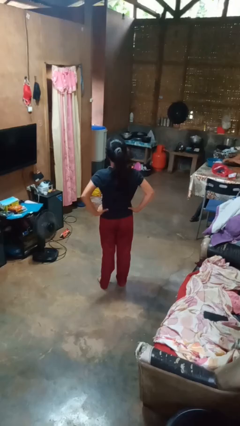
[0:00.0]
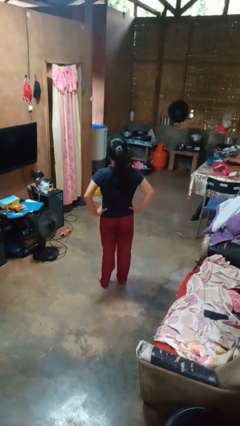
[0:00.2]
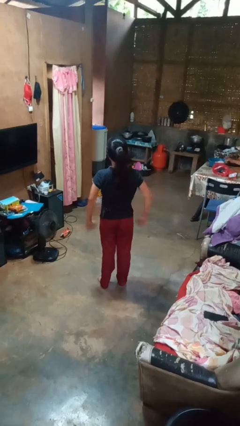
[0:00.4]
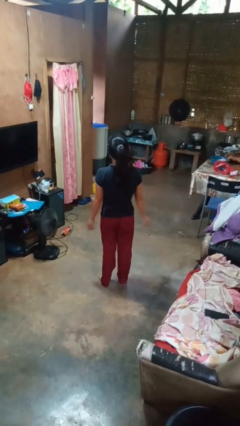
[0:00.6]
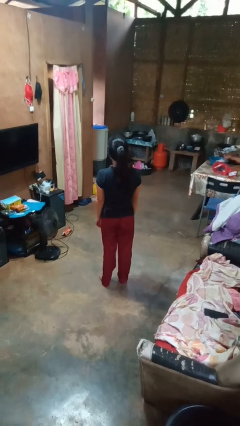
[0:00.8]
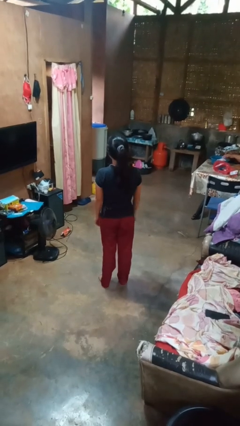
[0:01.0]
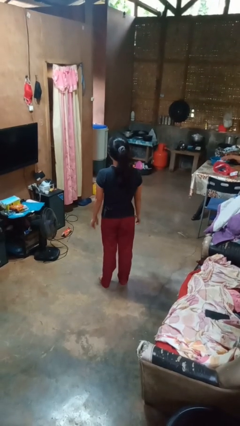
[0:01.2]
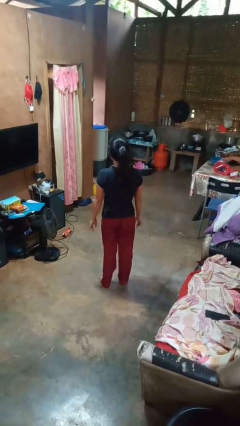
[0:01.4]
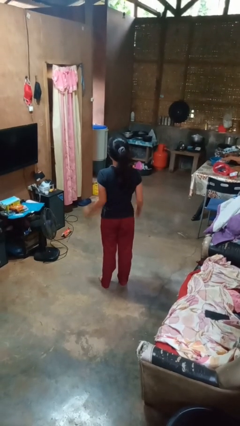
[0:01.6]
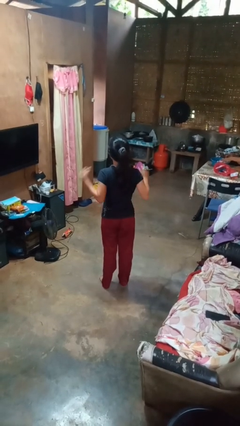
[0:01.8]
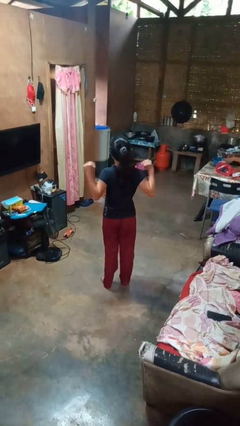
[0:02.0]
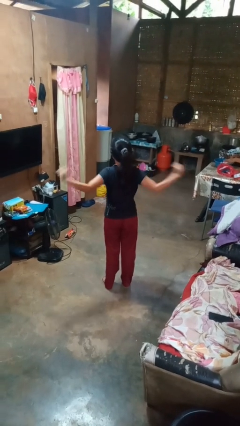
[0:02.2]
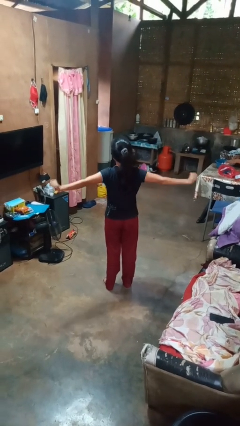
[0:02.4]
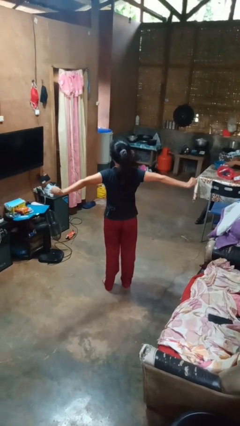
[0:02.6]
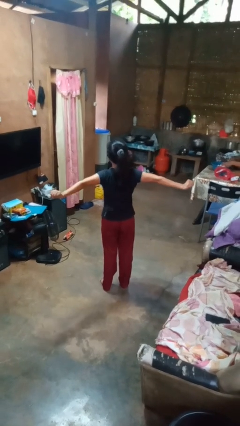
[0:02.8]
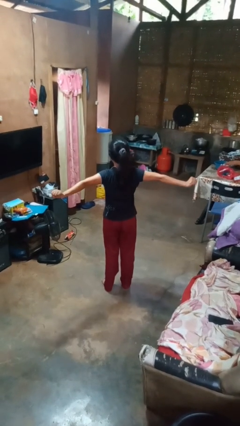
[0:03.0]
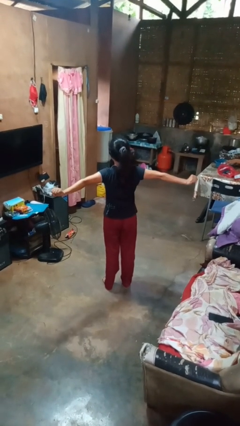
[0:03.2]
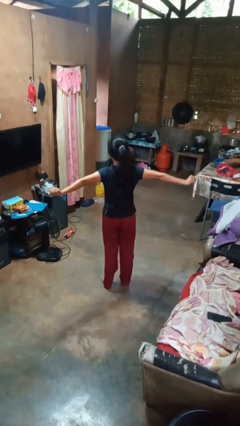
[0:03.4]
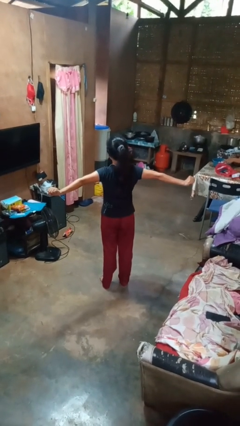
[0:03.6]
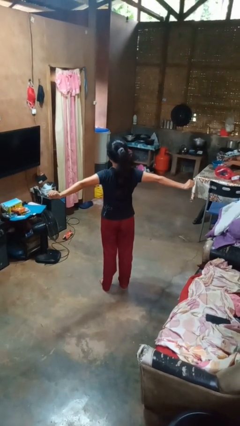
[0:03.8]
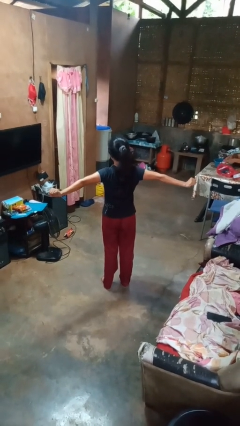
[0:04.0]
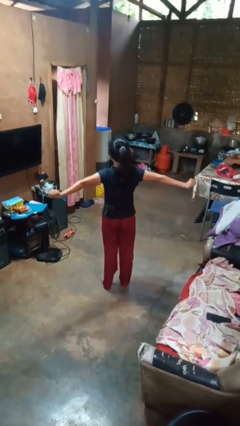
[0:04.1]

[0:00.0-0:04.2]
person stretches arms to side

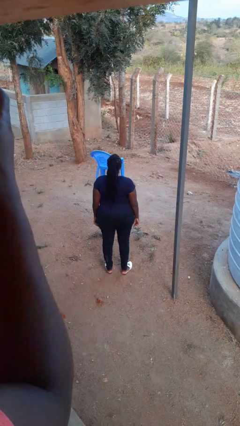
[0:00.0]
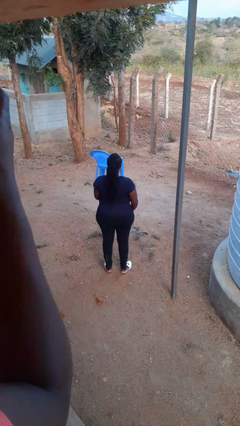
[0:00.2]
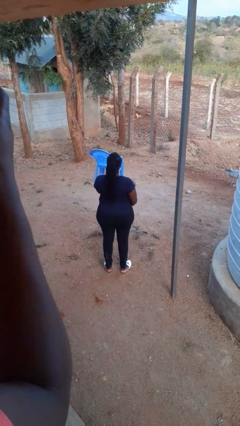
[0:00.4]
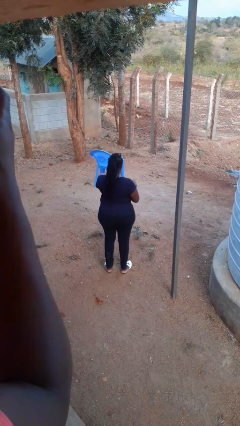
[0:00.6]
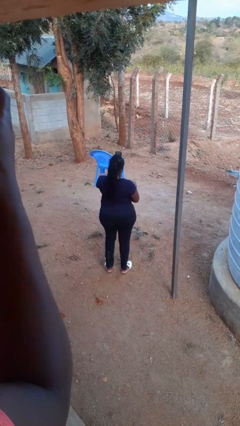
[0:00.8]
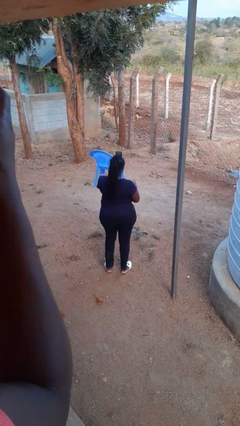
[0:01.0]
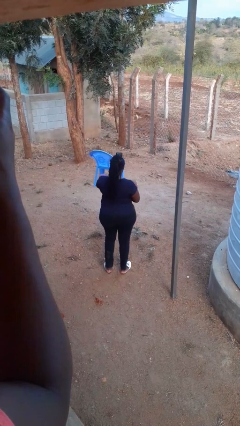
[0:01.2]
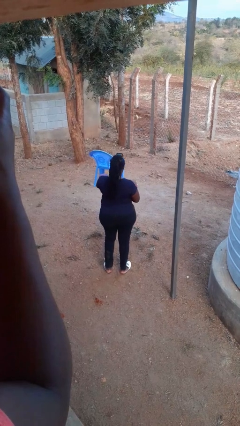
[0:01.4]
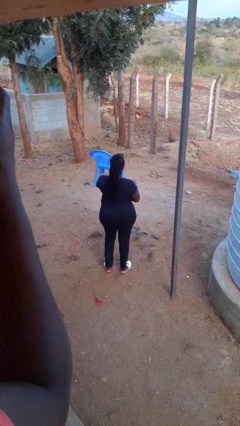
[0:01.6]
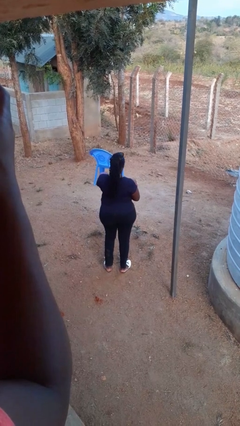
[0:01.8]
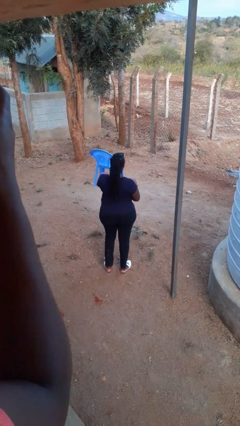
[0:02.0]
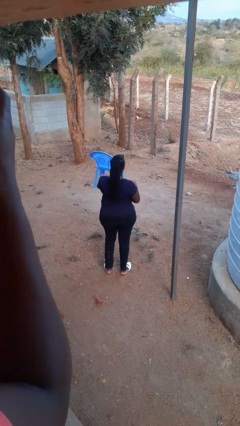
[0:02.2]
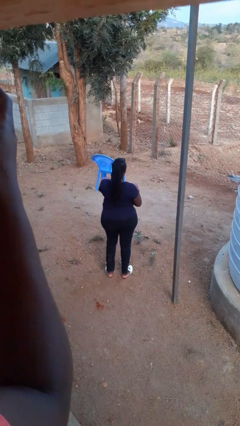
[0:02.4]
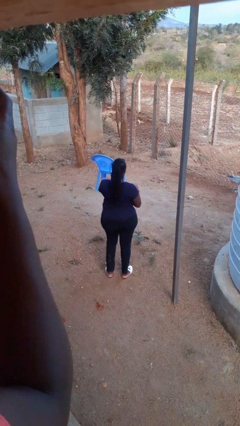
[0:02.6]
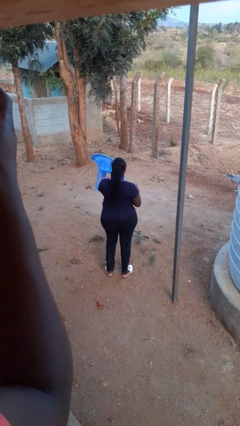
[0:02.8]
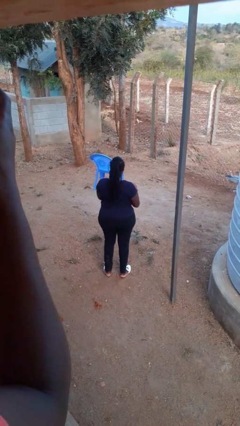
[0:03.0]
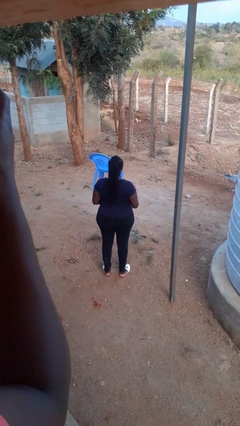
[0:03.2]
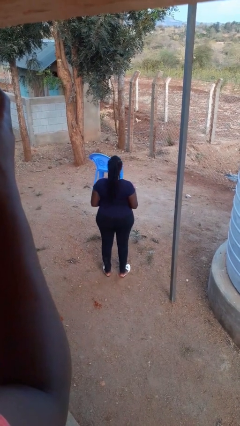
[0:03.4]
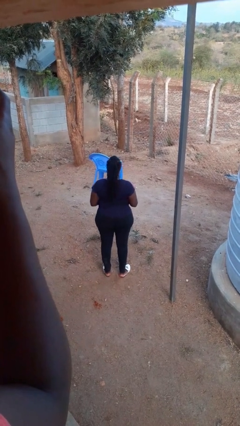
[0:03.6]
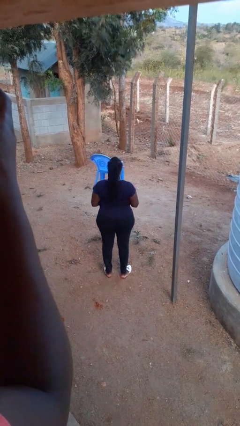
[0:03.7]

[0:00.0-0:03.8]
person takes selfie

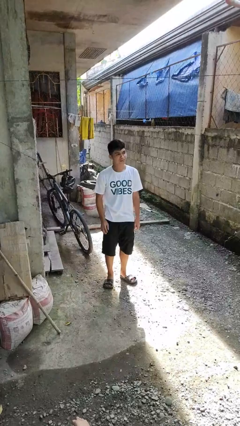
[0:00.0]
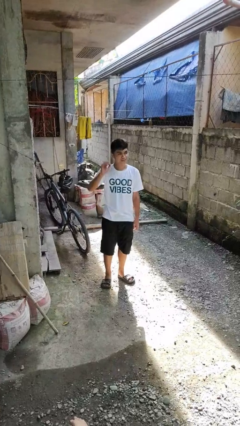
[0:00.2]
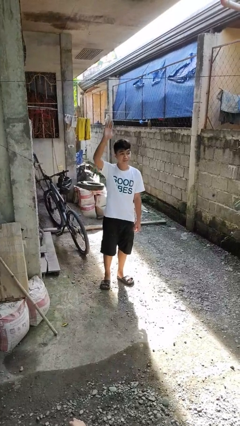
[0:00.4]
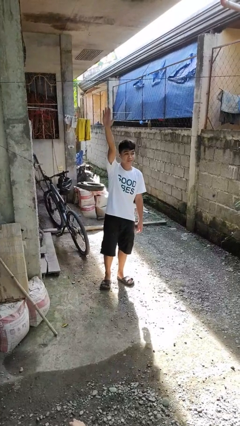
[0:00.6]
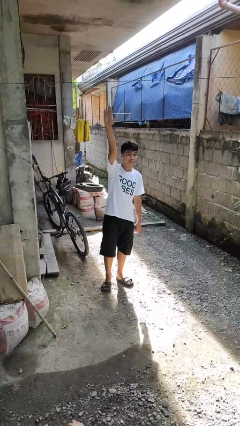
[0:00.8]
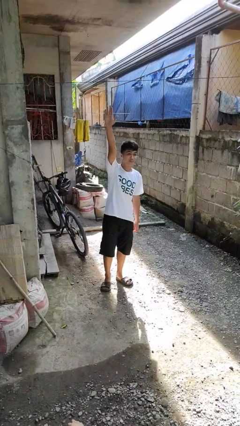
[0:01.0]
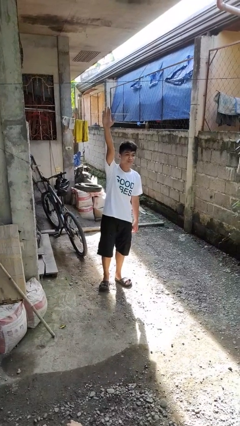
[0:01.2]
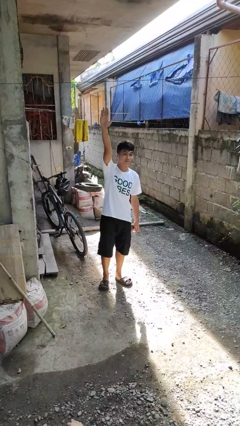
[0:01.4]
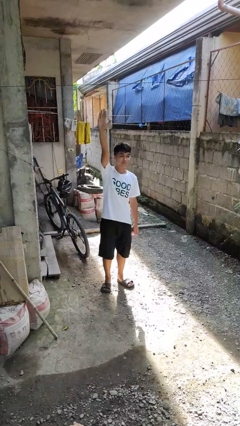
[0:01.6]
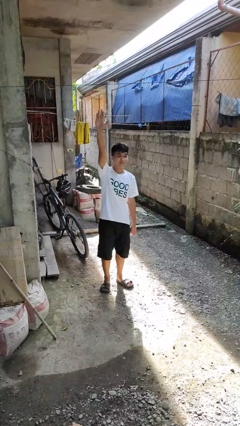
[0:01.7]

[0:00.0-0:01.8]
person gestures raise hand

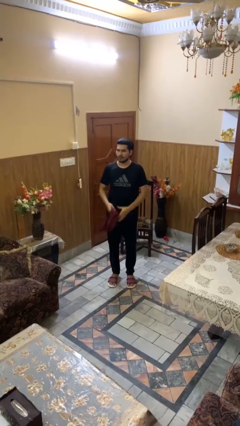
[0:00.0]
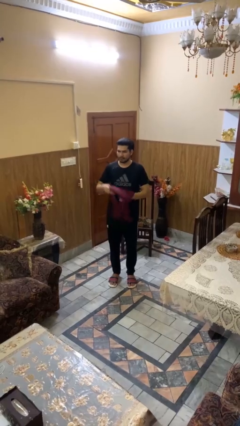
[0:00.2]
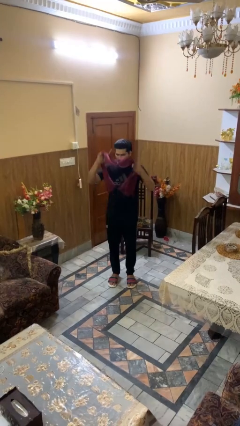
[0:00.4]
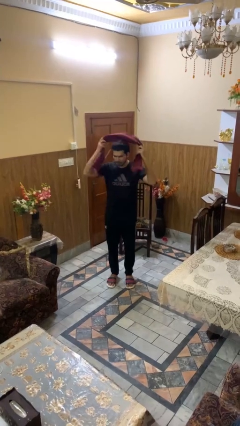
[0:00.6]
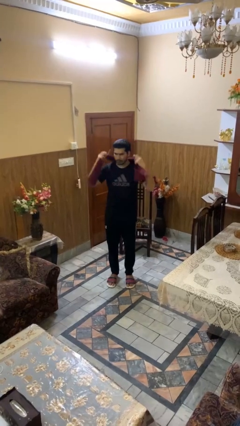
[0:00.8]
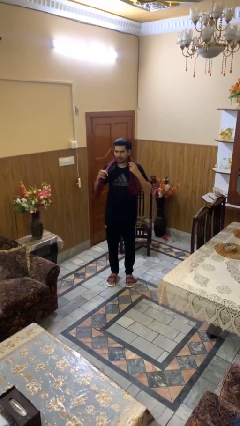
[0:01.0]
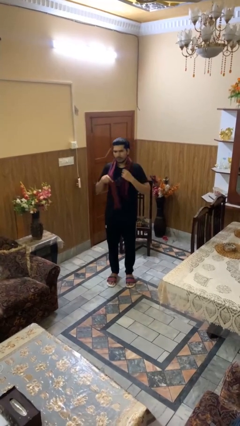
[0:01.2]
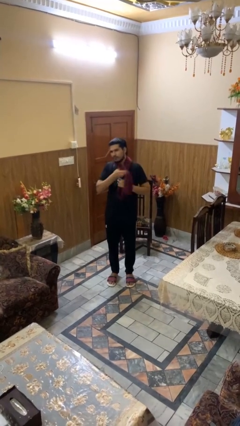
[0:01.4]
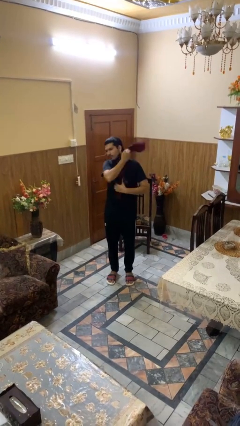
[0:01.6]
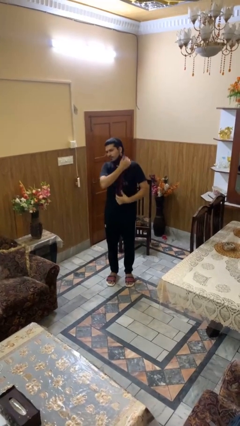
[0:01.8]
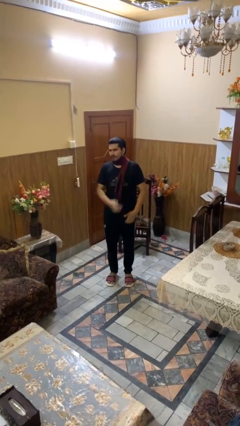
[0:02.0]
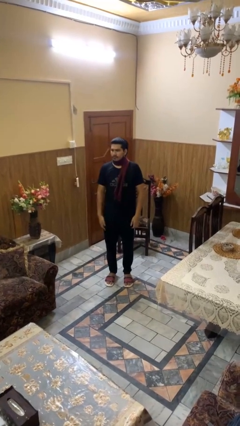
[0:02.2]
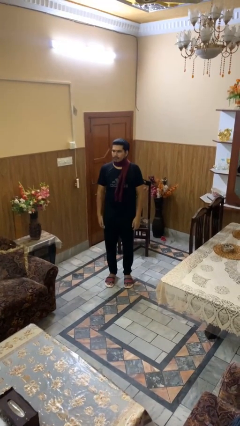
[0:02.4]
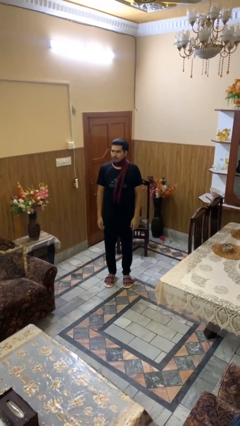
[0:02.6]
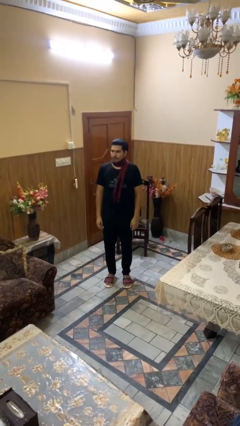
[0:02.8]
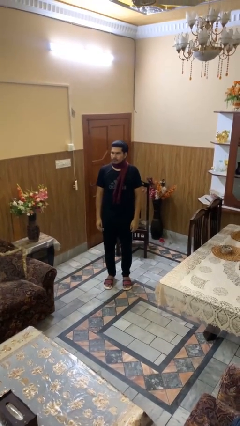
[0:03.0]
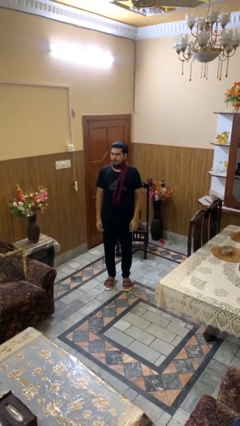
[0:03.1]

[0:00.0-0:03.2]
person puts on scarf

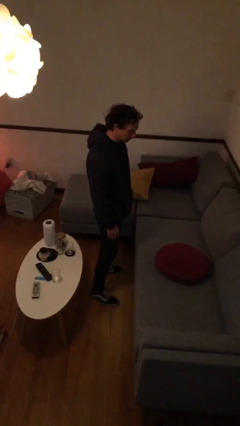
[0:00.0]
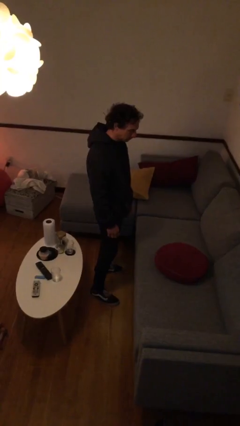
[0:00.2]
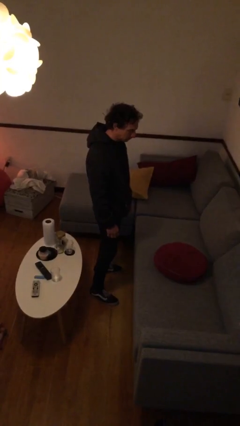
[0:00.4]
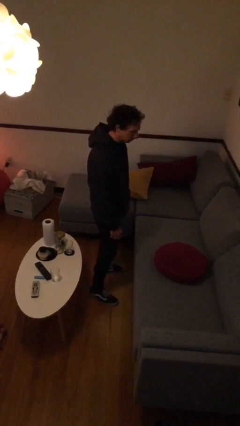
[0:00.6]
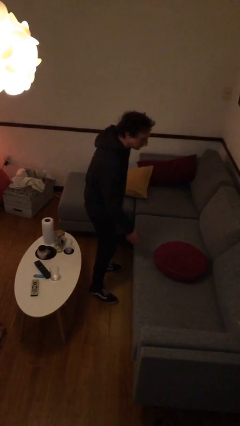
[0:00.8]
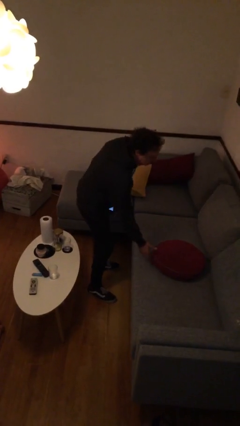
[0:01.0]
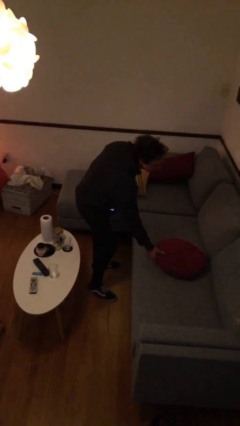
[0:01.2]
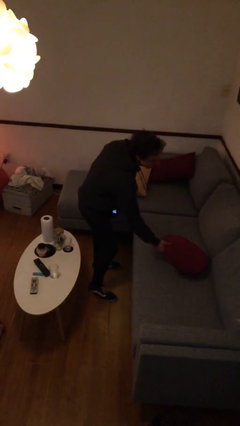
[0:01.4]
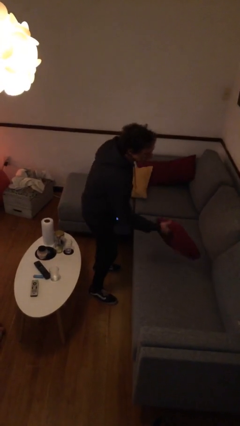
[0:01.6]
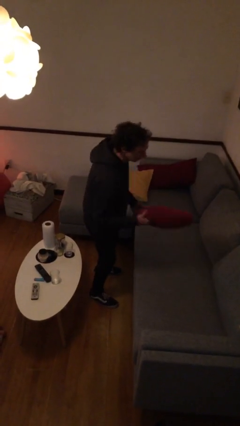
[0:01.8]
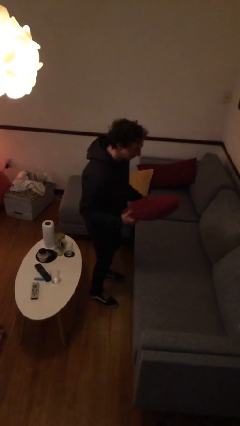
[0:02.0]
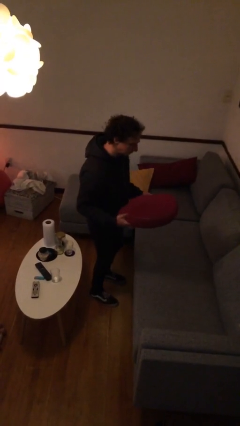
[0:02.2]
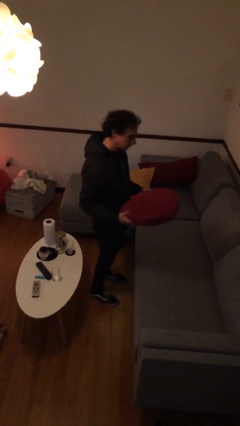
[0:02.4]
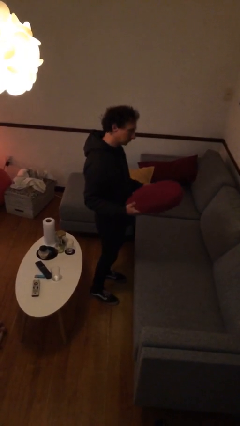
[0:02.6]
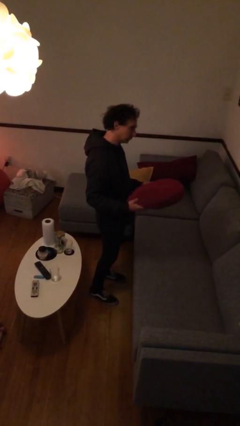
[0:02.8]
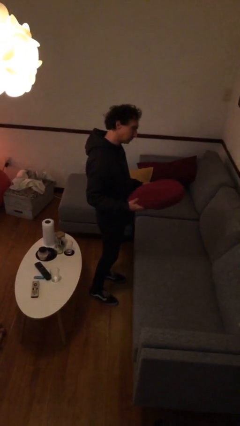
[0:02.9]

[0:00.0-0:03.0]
person picks up object from couch

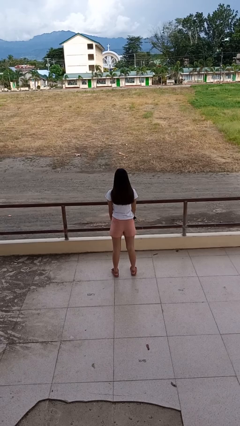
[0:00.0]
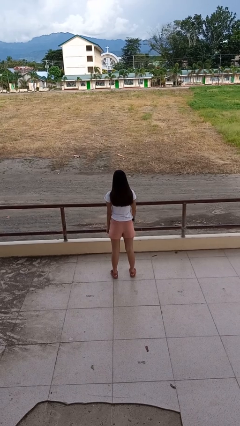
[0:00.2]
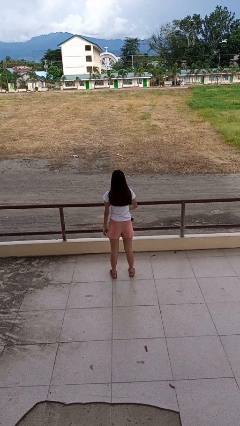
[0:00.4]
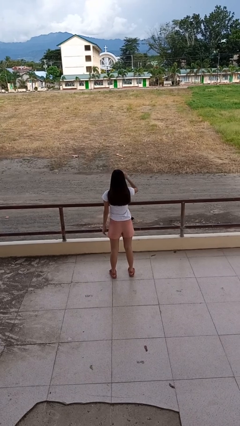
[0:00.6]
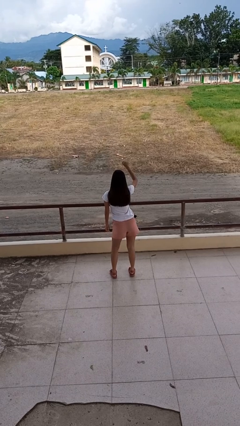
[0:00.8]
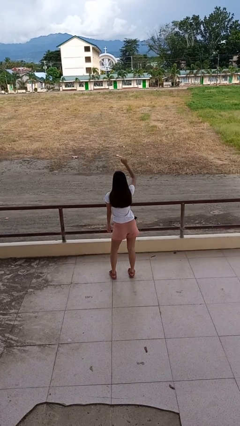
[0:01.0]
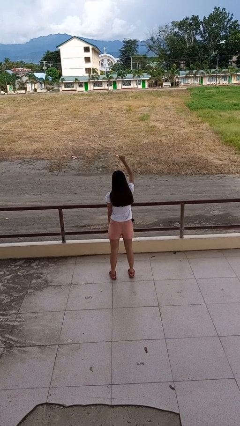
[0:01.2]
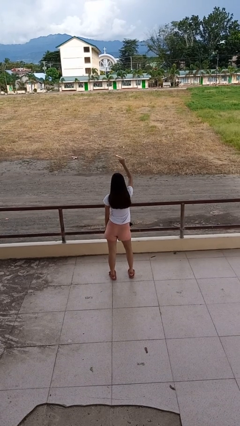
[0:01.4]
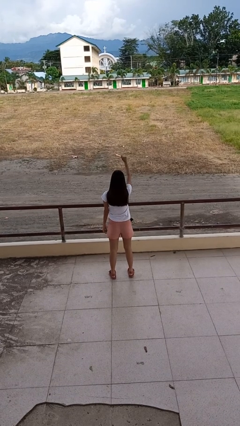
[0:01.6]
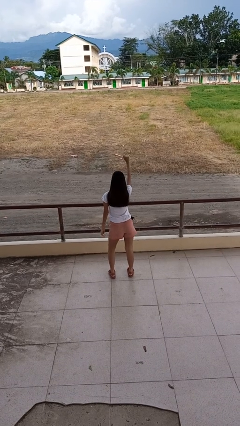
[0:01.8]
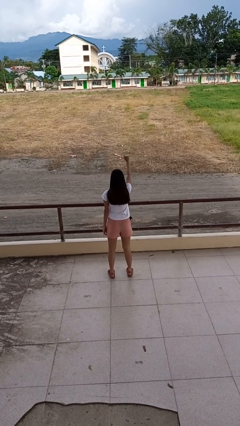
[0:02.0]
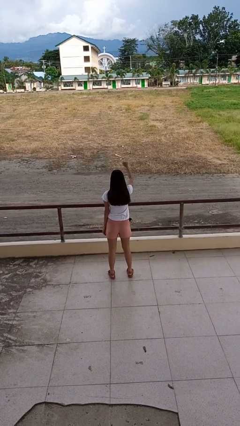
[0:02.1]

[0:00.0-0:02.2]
person dances in place
